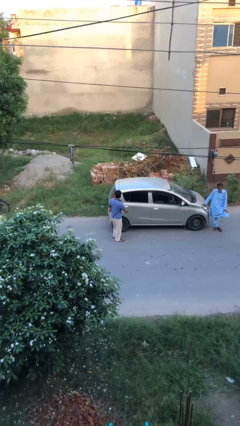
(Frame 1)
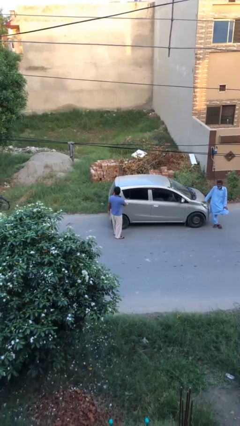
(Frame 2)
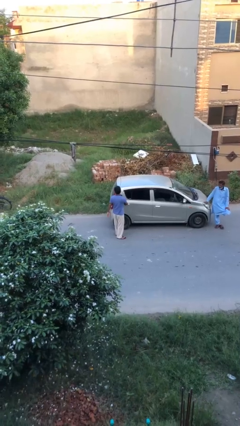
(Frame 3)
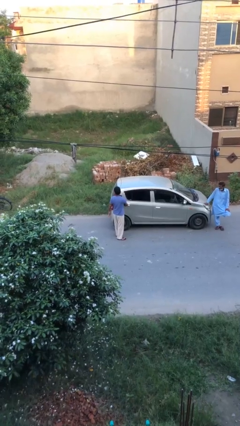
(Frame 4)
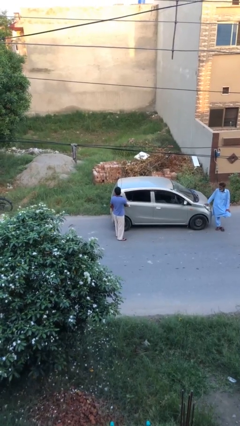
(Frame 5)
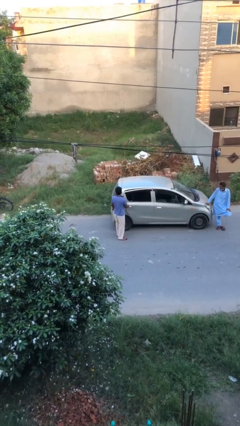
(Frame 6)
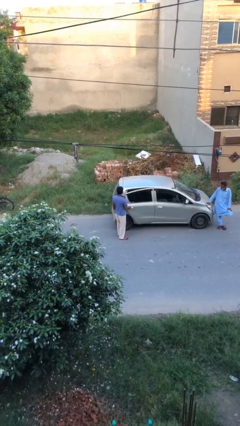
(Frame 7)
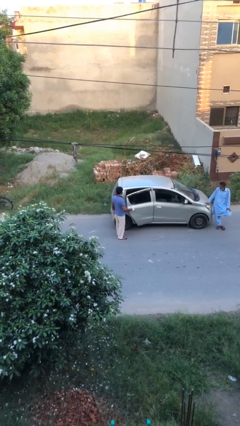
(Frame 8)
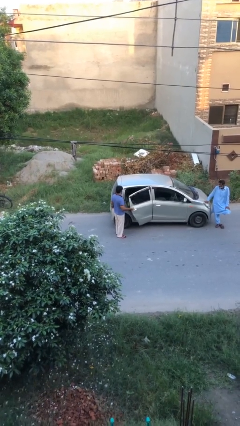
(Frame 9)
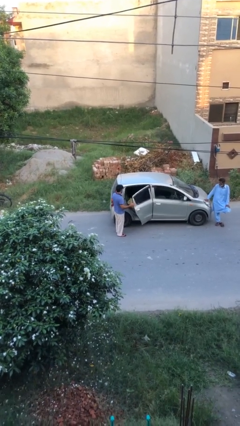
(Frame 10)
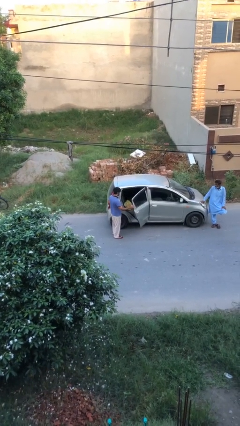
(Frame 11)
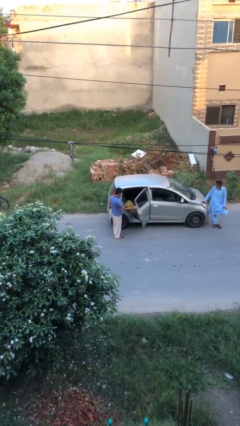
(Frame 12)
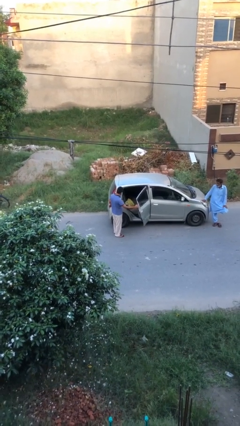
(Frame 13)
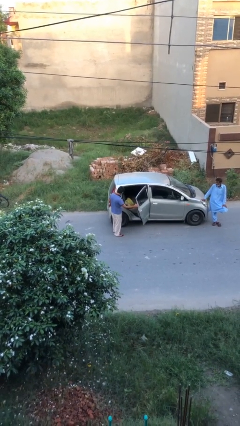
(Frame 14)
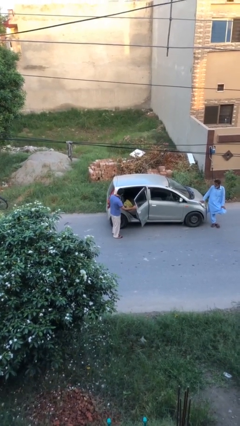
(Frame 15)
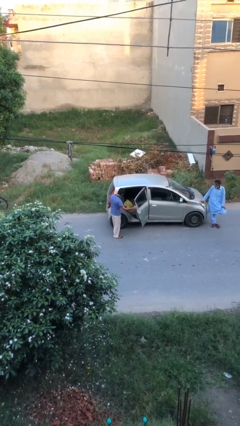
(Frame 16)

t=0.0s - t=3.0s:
person opens car door

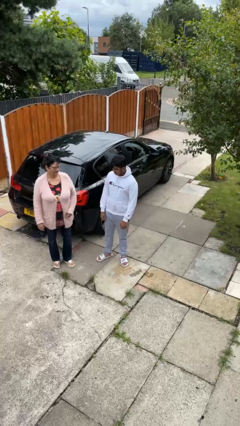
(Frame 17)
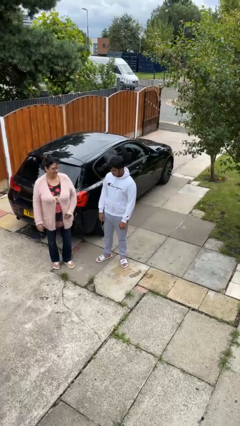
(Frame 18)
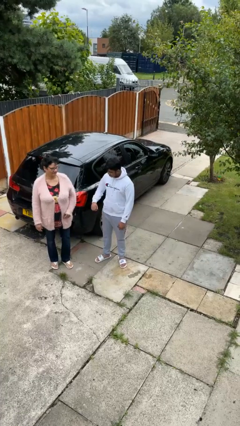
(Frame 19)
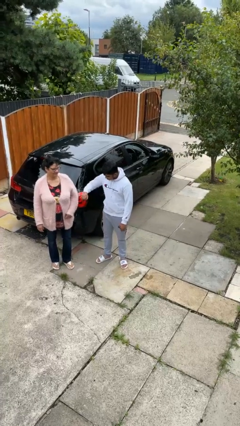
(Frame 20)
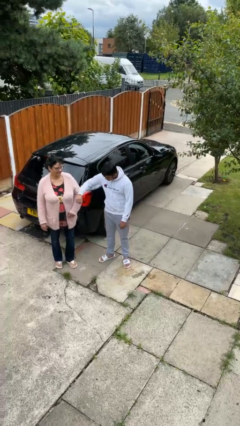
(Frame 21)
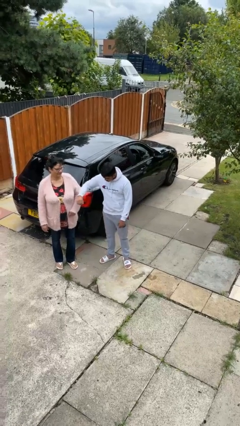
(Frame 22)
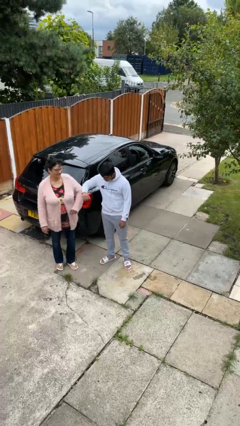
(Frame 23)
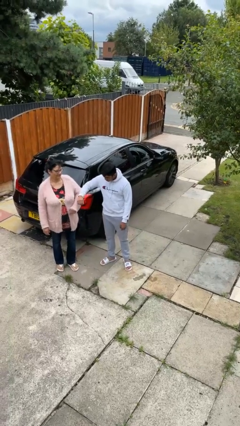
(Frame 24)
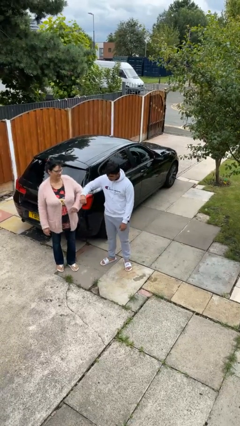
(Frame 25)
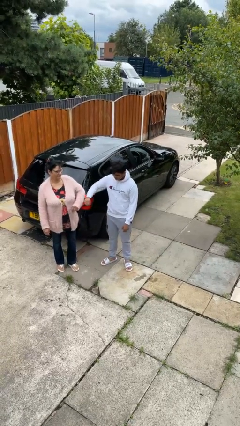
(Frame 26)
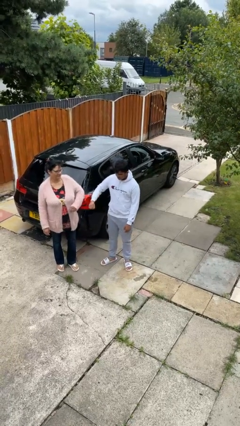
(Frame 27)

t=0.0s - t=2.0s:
person nudges person with elbow

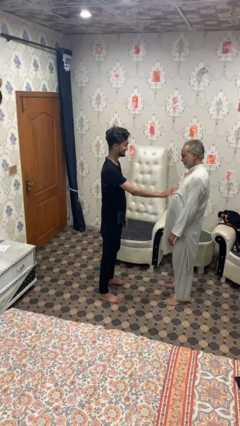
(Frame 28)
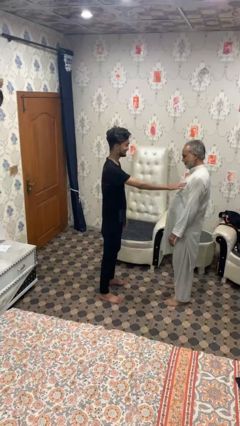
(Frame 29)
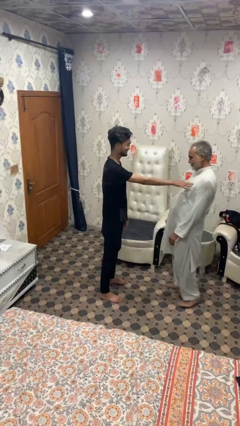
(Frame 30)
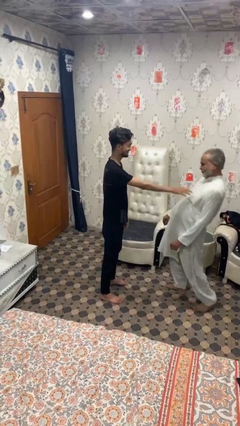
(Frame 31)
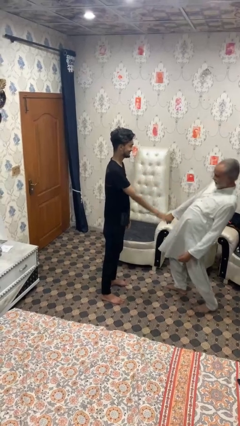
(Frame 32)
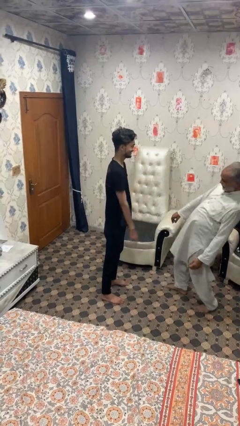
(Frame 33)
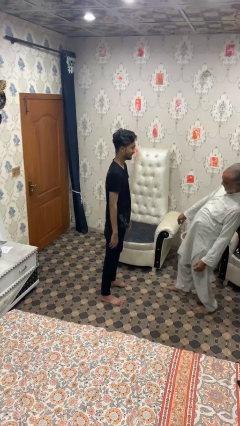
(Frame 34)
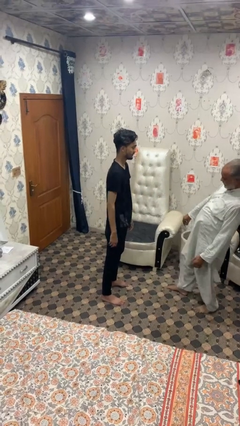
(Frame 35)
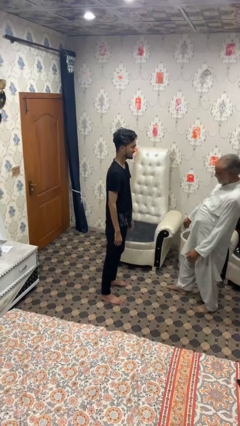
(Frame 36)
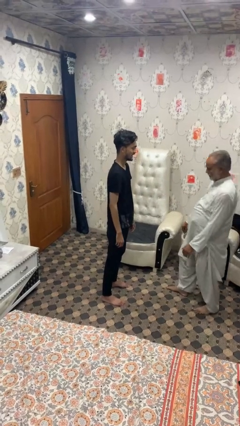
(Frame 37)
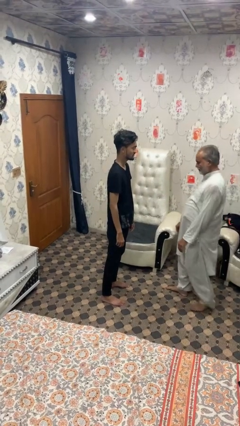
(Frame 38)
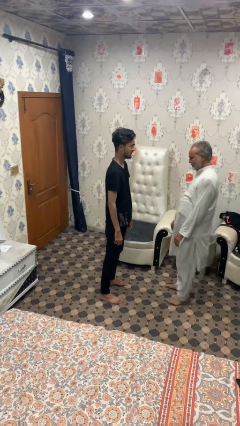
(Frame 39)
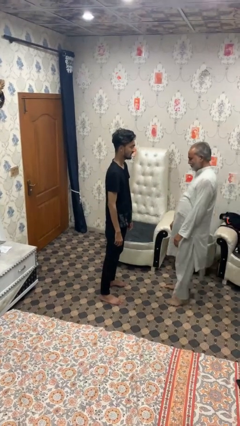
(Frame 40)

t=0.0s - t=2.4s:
person shoves person

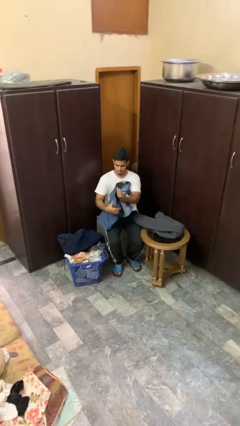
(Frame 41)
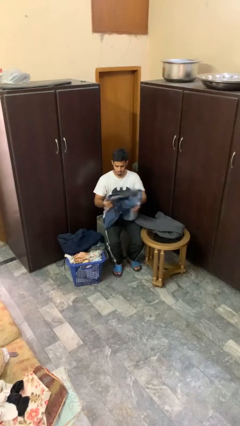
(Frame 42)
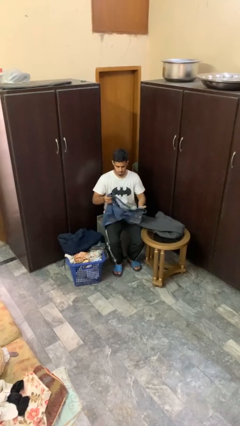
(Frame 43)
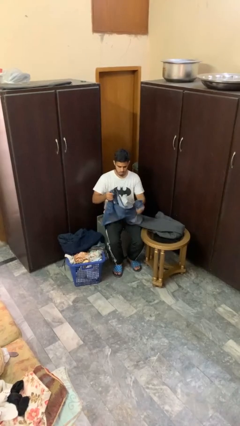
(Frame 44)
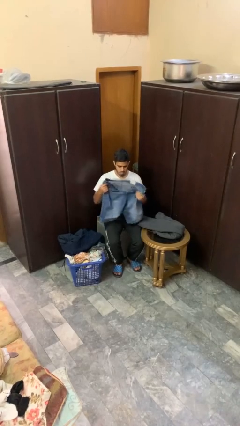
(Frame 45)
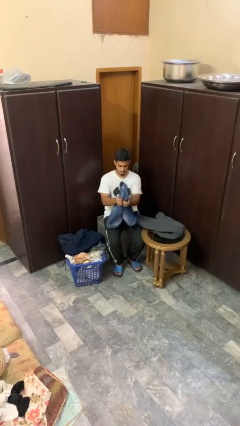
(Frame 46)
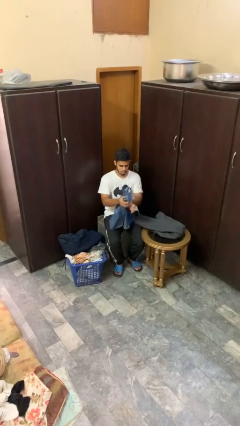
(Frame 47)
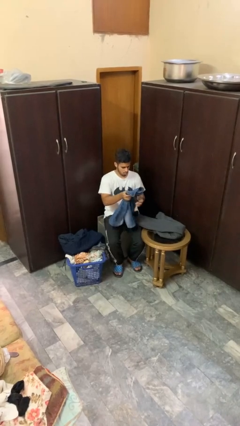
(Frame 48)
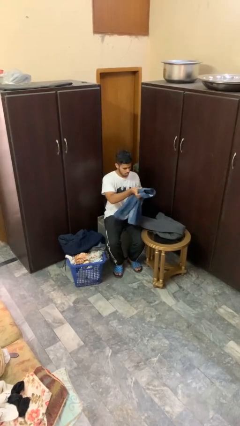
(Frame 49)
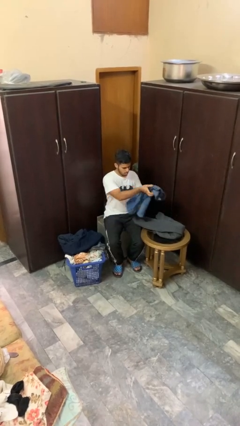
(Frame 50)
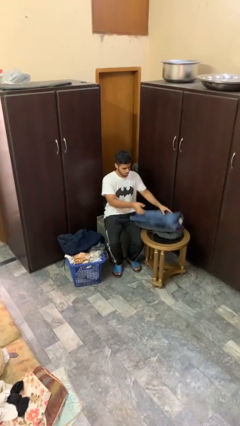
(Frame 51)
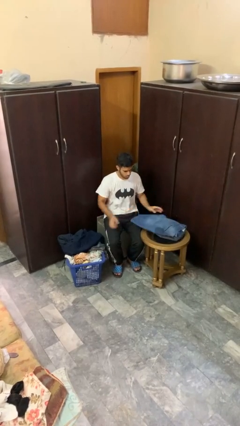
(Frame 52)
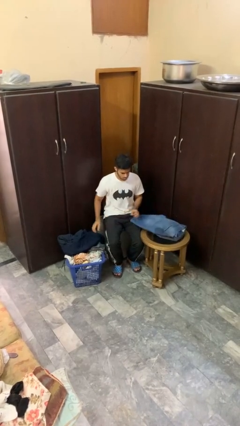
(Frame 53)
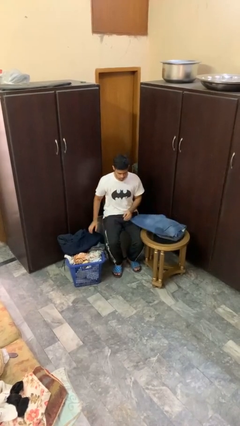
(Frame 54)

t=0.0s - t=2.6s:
person folds pants

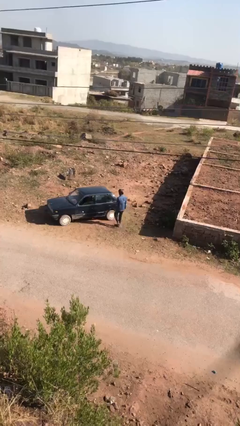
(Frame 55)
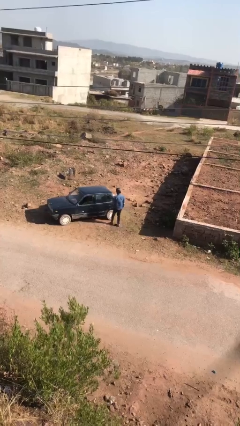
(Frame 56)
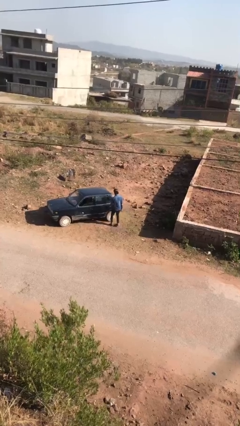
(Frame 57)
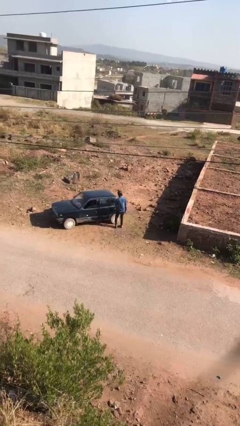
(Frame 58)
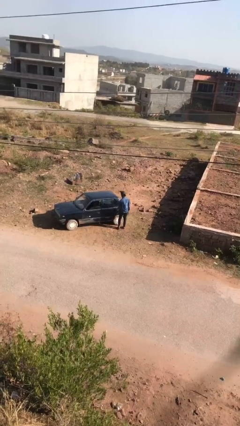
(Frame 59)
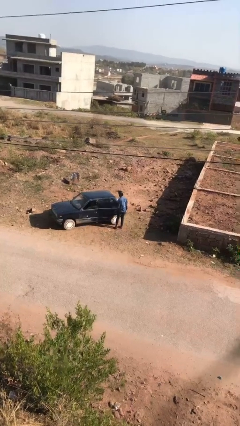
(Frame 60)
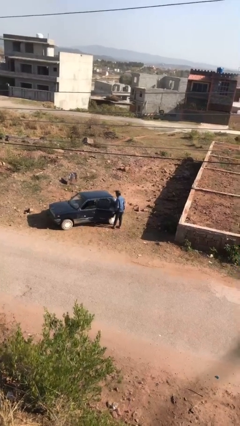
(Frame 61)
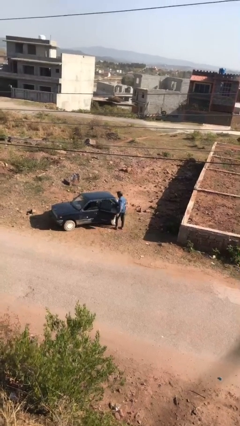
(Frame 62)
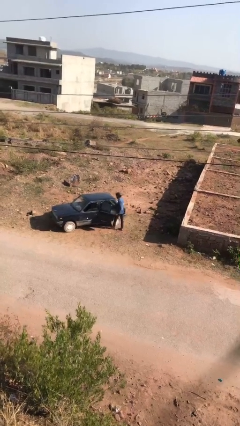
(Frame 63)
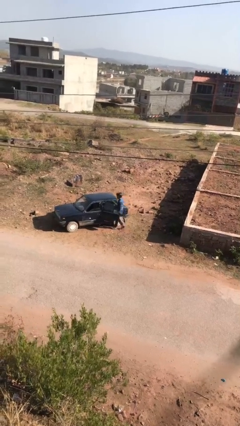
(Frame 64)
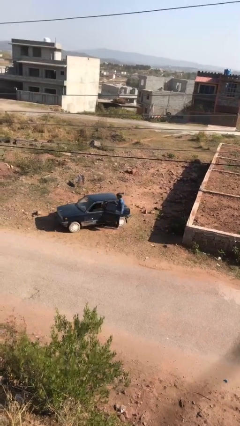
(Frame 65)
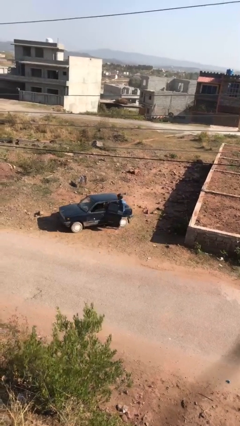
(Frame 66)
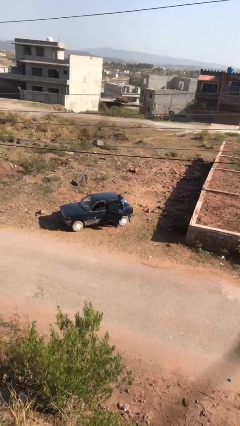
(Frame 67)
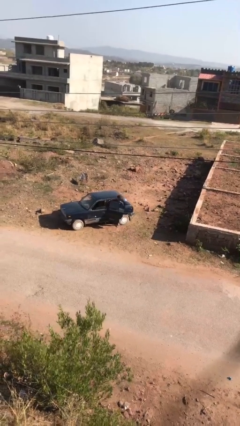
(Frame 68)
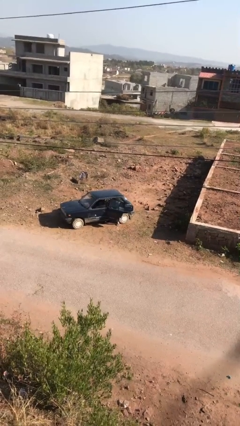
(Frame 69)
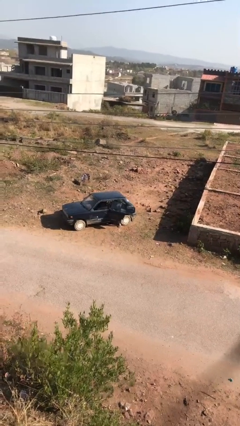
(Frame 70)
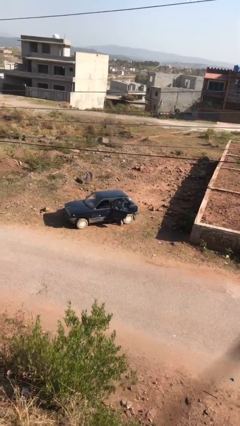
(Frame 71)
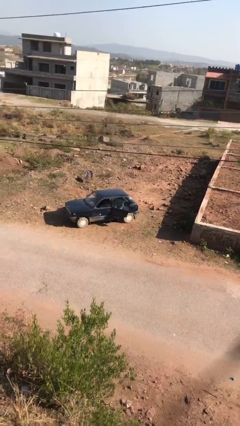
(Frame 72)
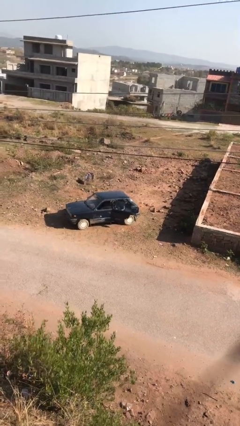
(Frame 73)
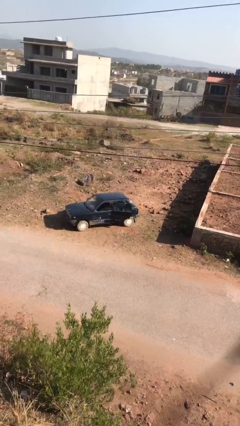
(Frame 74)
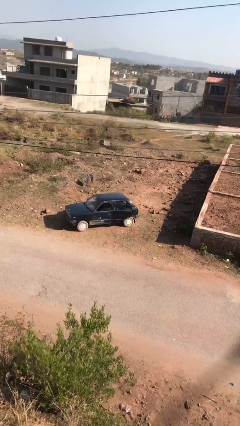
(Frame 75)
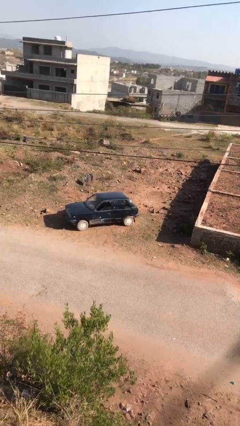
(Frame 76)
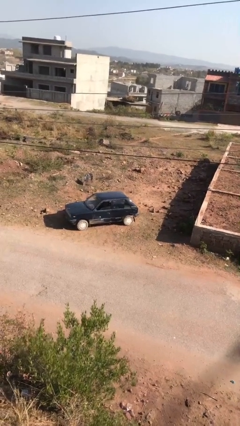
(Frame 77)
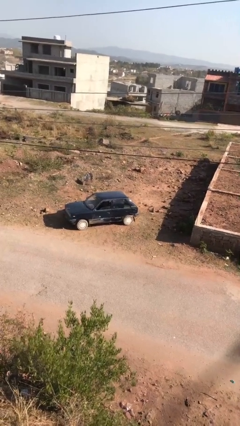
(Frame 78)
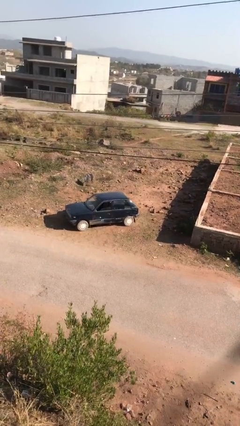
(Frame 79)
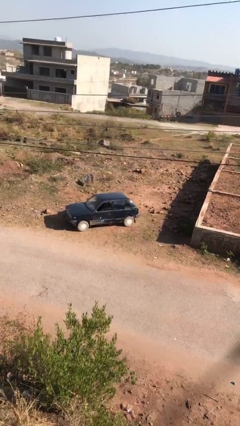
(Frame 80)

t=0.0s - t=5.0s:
car picks up person

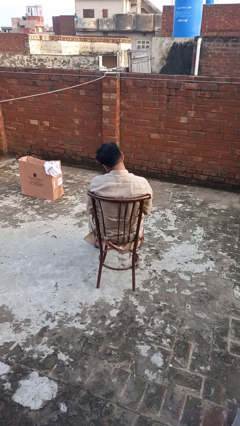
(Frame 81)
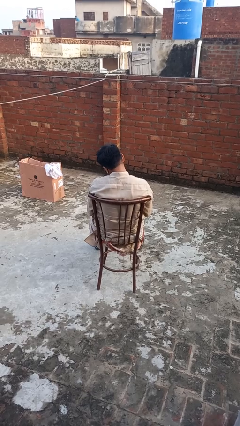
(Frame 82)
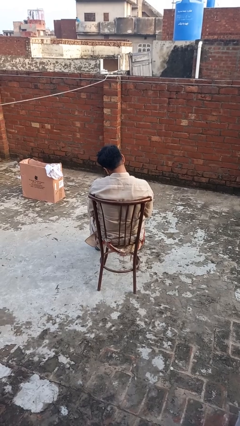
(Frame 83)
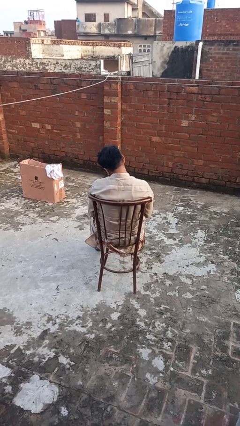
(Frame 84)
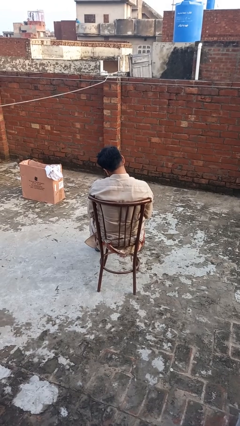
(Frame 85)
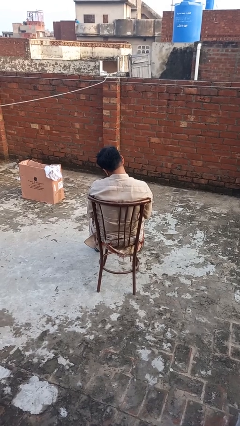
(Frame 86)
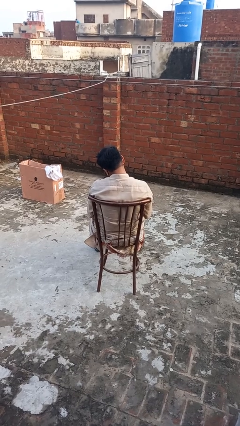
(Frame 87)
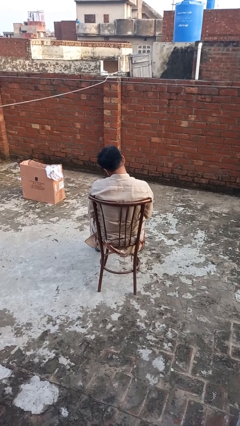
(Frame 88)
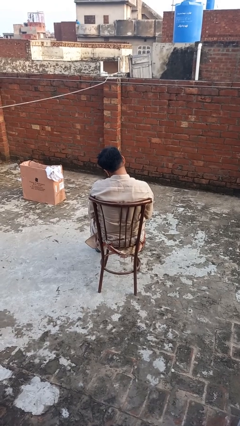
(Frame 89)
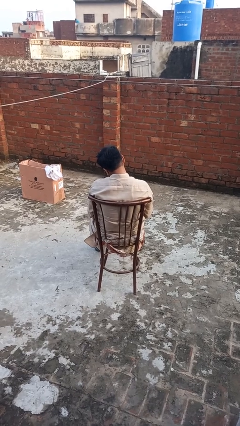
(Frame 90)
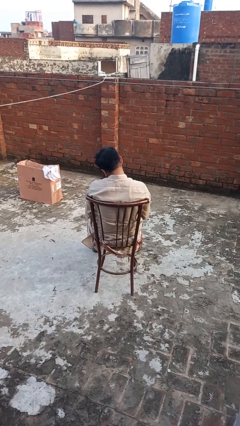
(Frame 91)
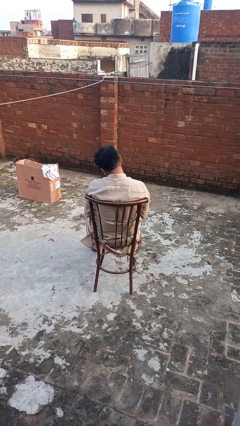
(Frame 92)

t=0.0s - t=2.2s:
person stirs mug
